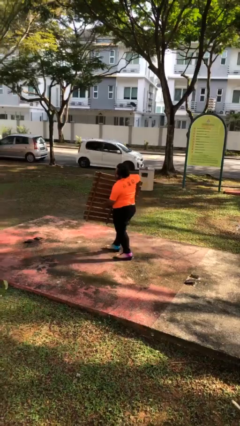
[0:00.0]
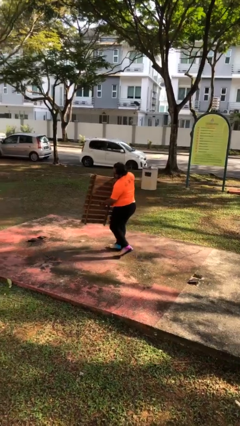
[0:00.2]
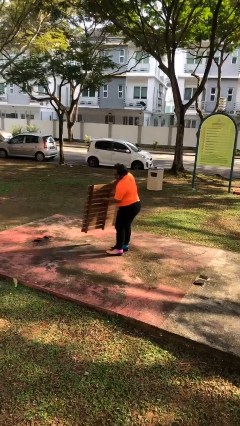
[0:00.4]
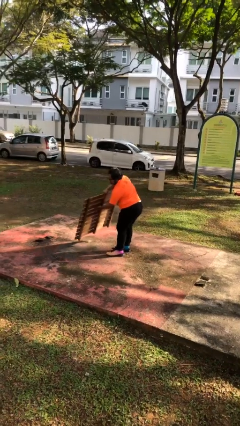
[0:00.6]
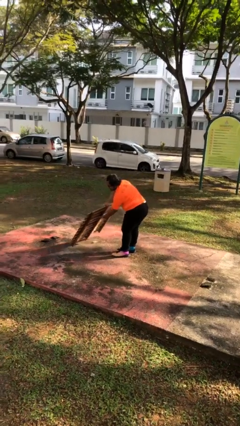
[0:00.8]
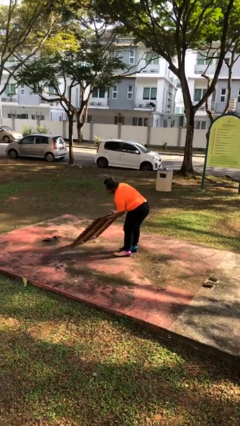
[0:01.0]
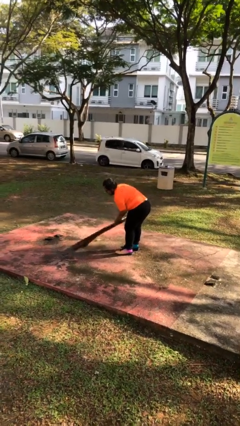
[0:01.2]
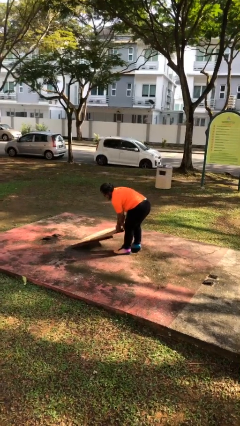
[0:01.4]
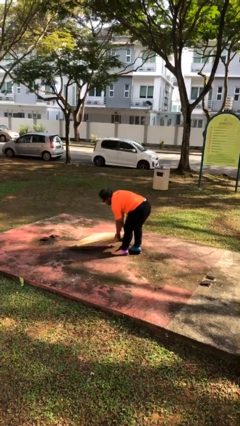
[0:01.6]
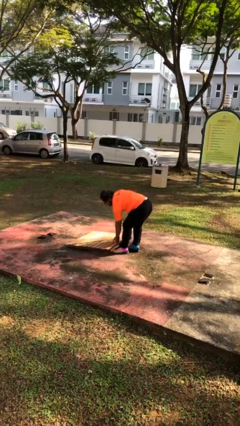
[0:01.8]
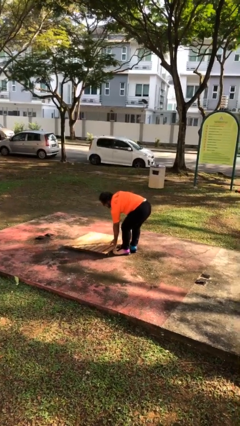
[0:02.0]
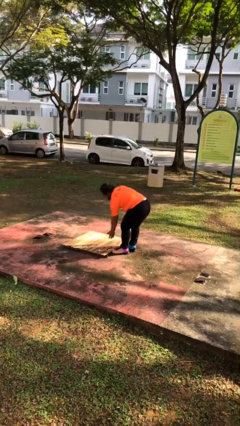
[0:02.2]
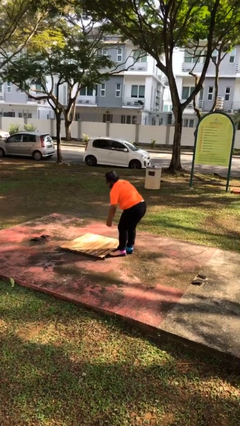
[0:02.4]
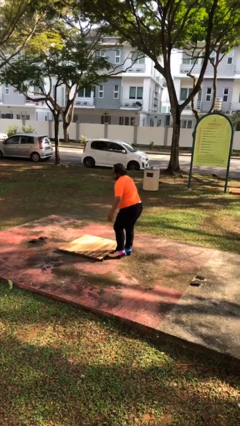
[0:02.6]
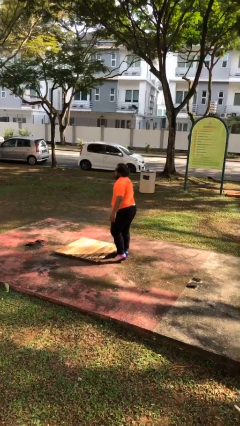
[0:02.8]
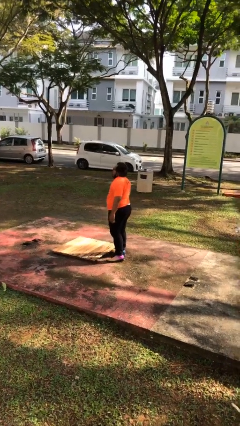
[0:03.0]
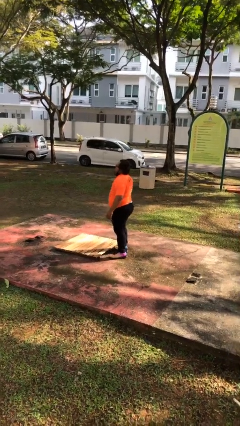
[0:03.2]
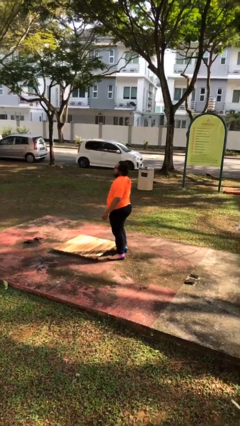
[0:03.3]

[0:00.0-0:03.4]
person puts down object on floor

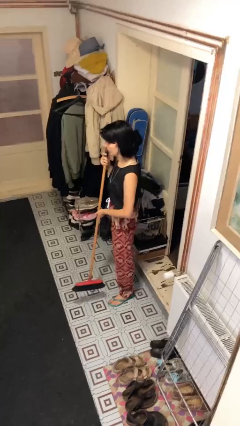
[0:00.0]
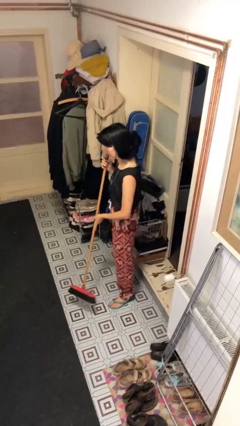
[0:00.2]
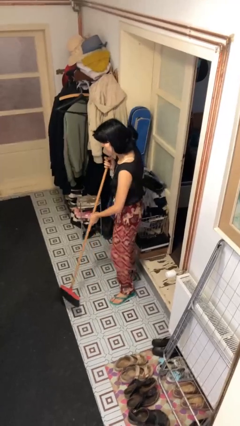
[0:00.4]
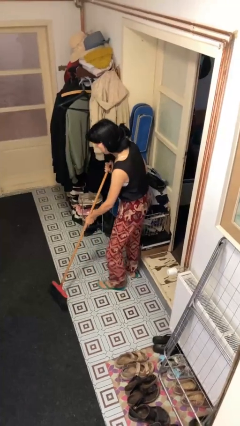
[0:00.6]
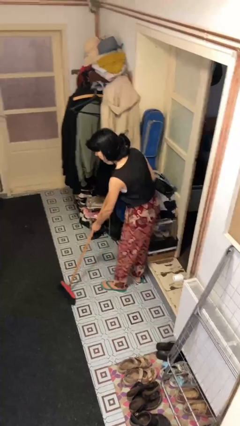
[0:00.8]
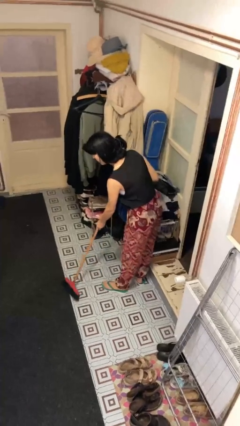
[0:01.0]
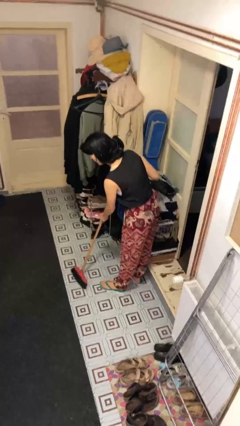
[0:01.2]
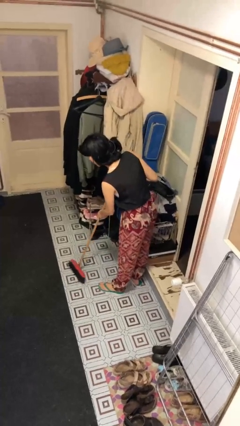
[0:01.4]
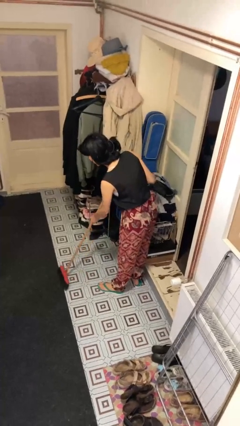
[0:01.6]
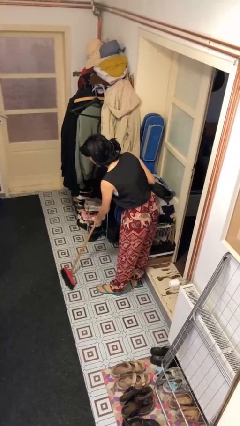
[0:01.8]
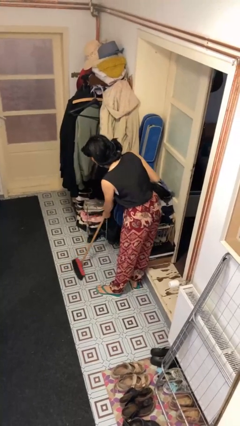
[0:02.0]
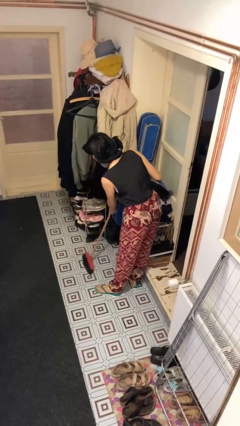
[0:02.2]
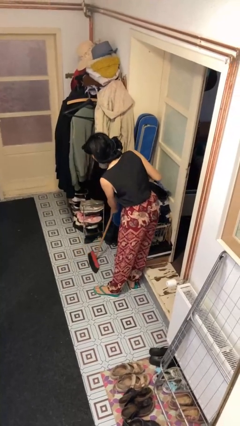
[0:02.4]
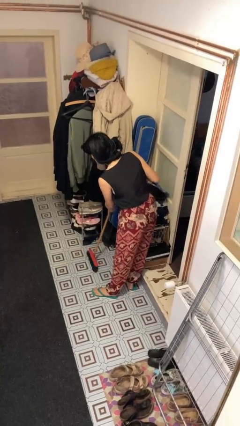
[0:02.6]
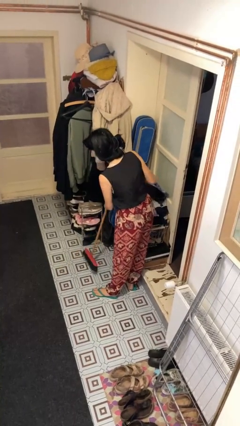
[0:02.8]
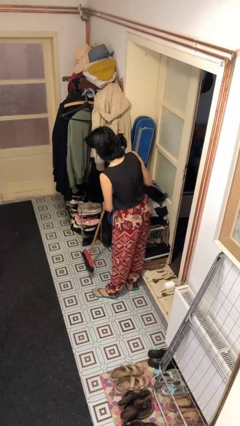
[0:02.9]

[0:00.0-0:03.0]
person sweeps floor

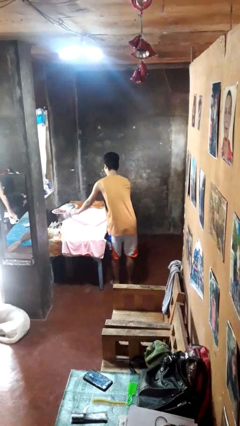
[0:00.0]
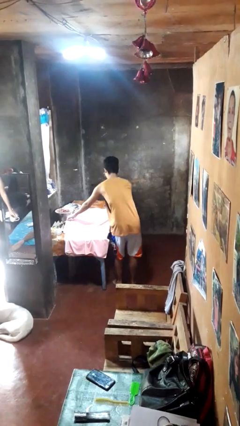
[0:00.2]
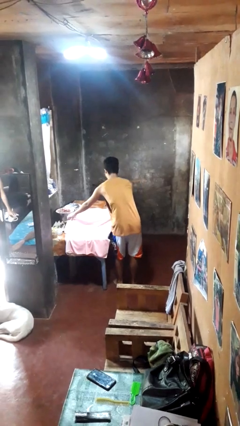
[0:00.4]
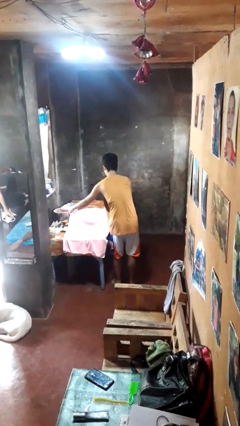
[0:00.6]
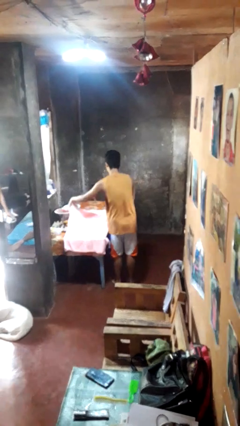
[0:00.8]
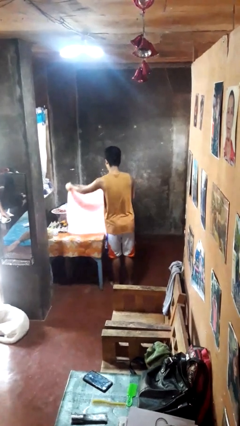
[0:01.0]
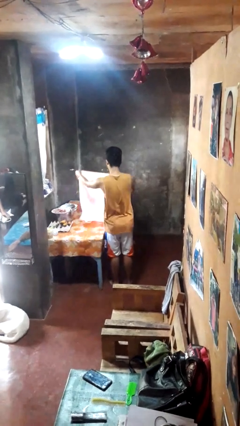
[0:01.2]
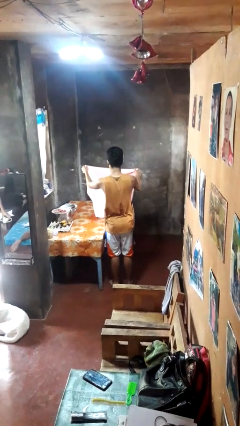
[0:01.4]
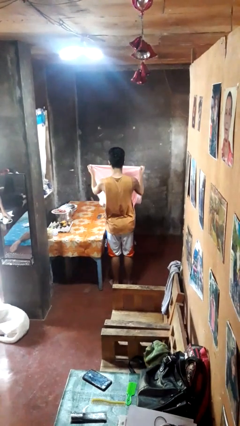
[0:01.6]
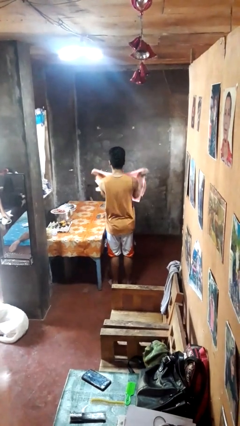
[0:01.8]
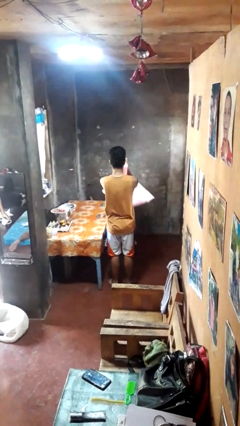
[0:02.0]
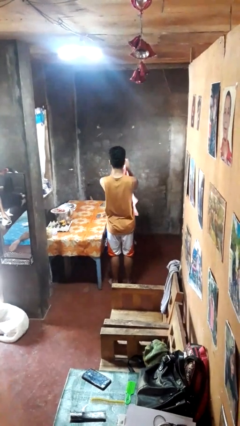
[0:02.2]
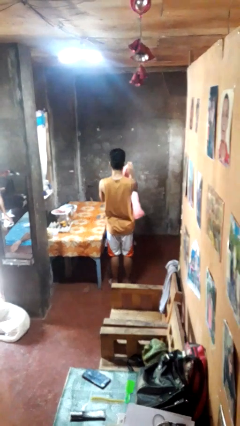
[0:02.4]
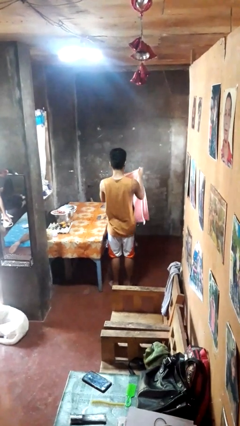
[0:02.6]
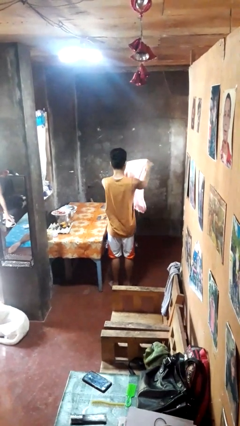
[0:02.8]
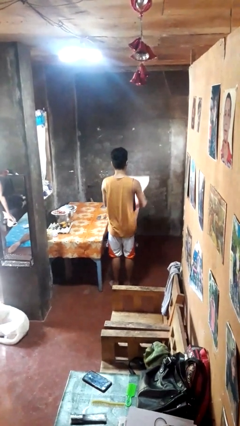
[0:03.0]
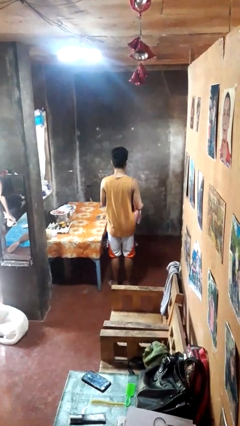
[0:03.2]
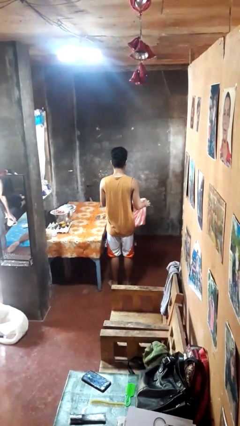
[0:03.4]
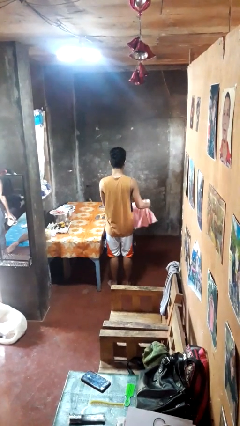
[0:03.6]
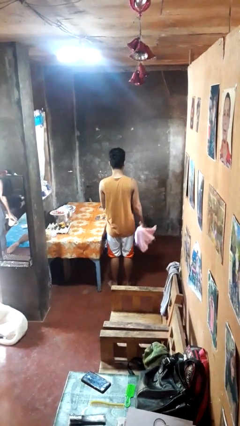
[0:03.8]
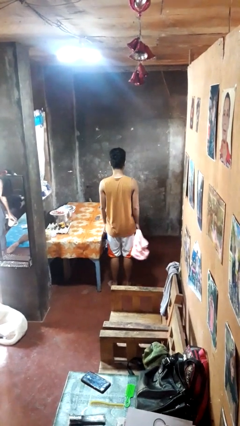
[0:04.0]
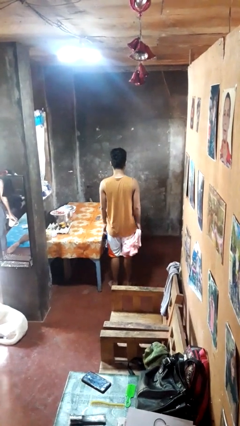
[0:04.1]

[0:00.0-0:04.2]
person folds tablecloth

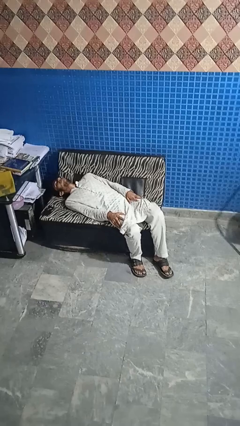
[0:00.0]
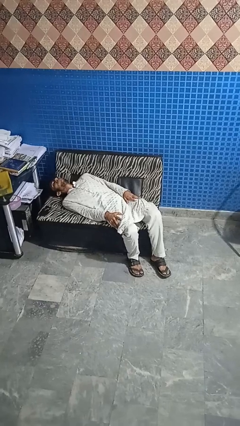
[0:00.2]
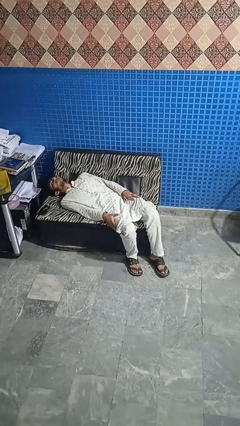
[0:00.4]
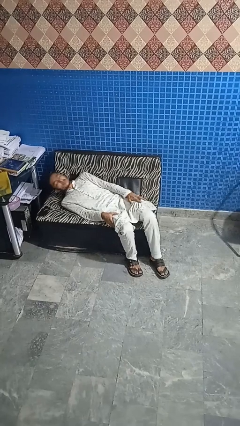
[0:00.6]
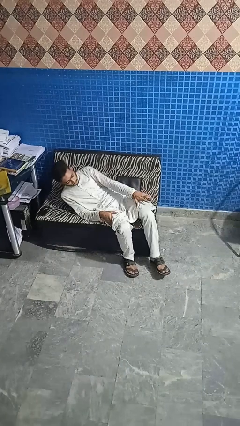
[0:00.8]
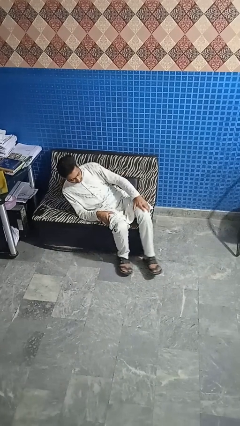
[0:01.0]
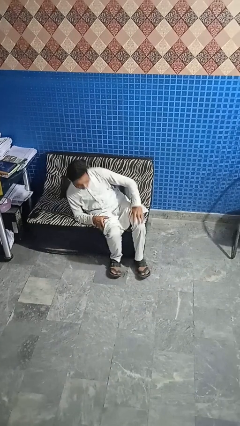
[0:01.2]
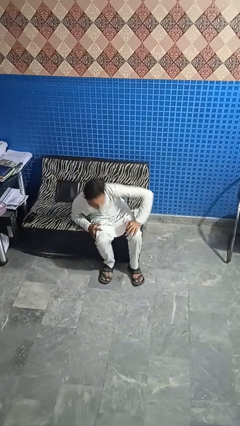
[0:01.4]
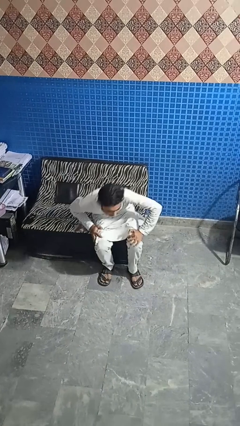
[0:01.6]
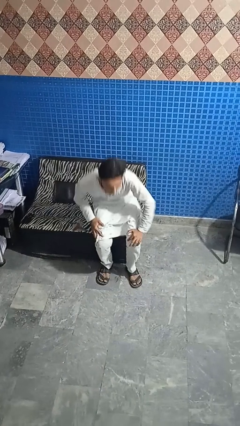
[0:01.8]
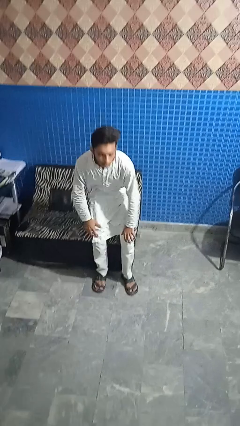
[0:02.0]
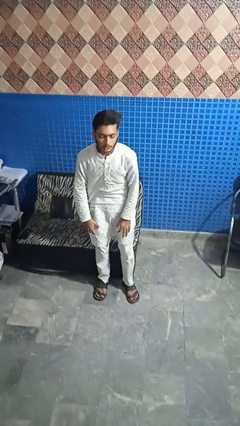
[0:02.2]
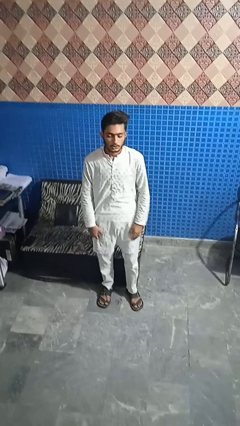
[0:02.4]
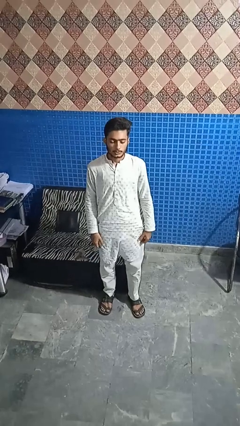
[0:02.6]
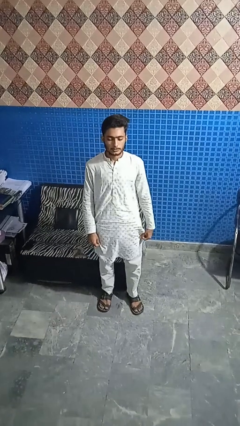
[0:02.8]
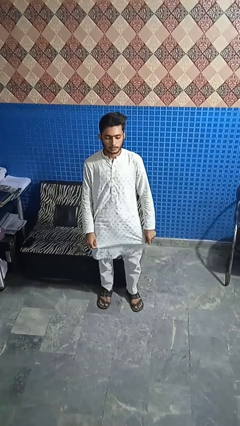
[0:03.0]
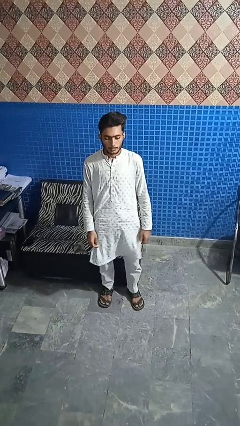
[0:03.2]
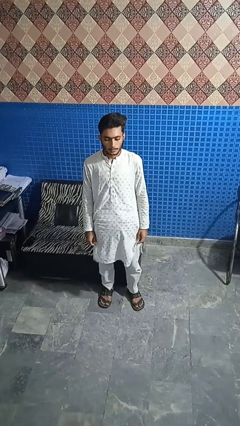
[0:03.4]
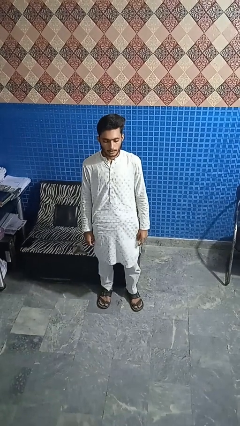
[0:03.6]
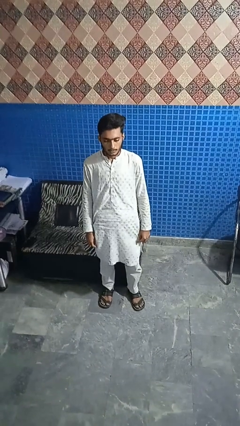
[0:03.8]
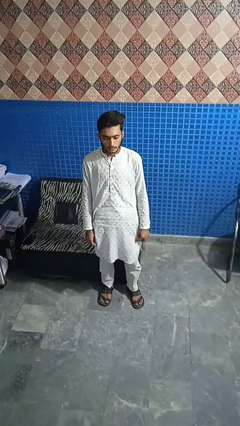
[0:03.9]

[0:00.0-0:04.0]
person stands up

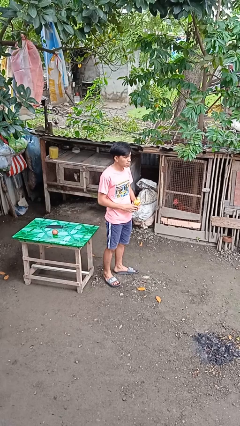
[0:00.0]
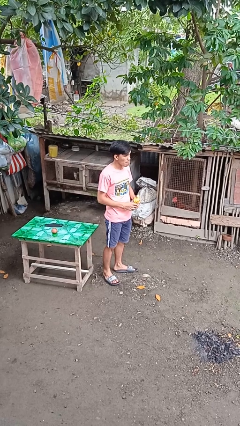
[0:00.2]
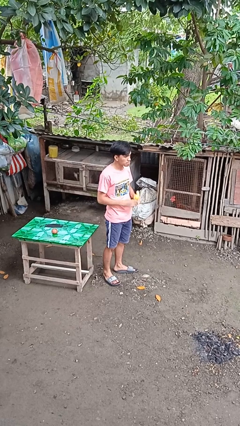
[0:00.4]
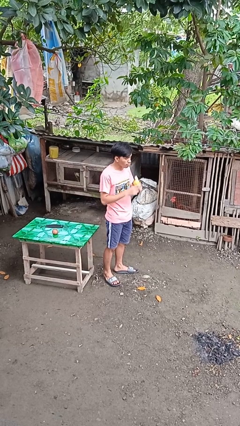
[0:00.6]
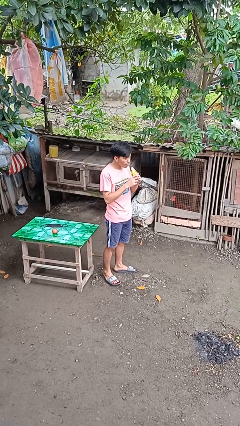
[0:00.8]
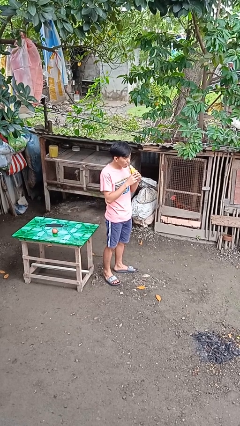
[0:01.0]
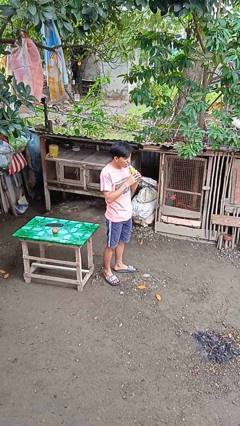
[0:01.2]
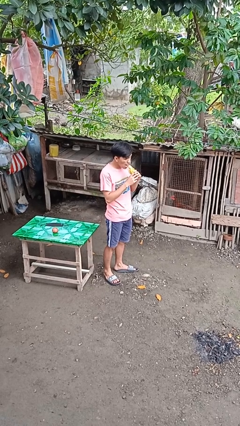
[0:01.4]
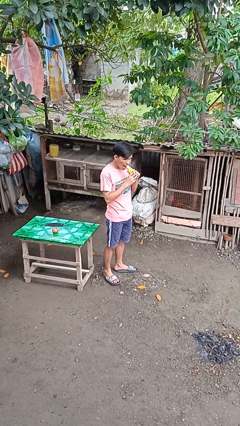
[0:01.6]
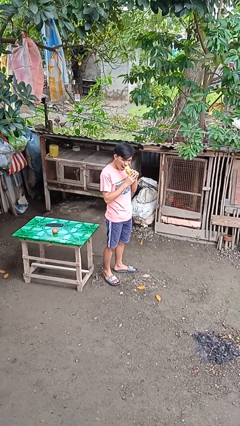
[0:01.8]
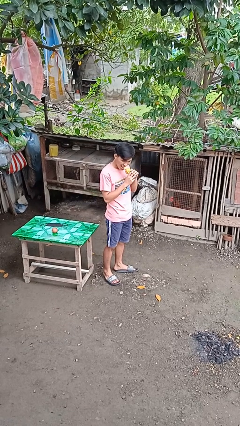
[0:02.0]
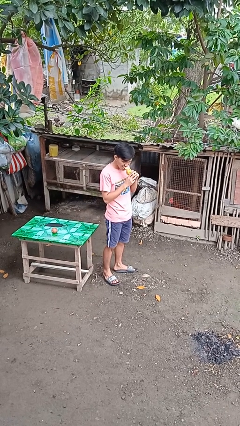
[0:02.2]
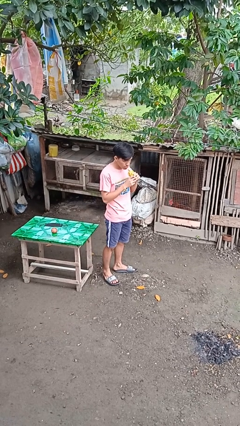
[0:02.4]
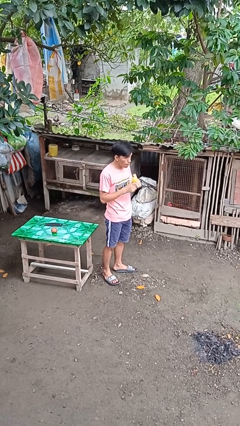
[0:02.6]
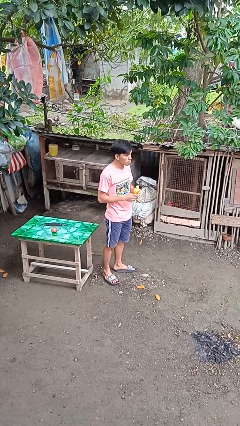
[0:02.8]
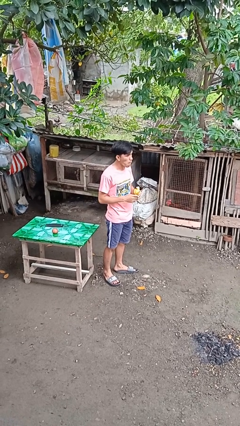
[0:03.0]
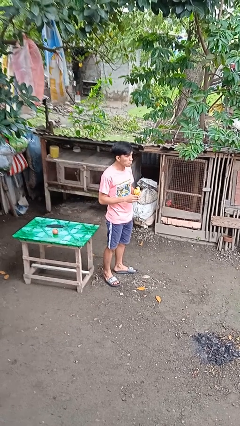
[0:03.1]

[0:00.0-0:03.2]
person eats banana
